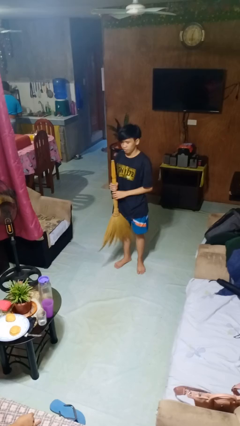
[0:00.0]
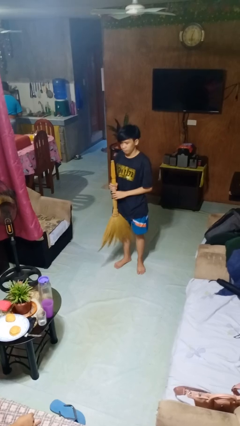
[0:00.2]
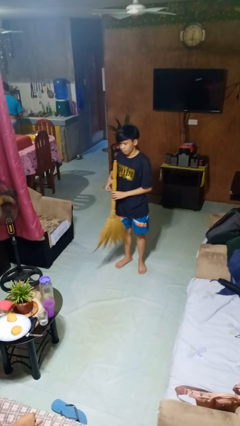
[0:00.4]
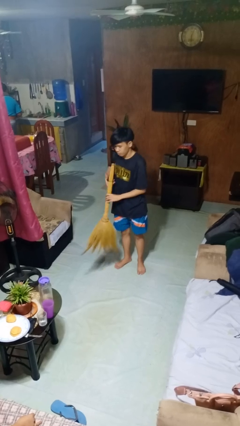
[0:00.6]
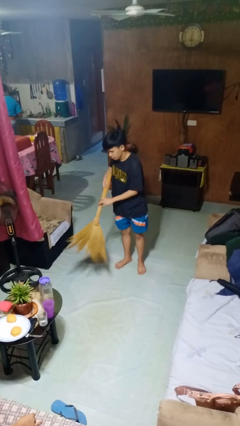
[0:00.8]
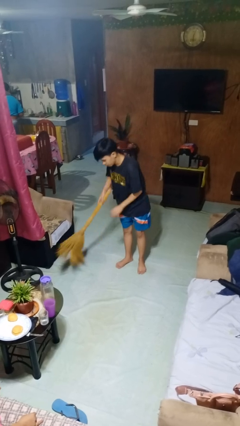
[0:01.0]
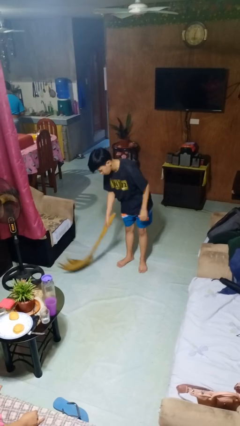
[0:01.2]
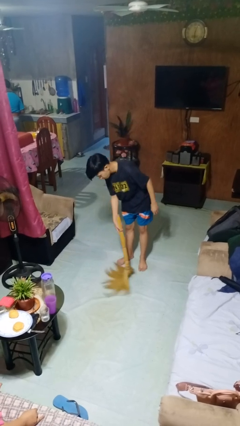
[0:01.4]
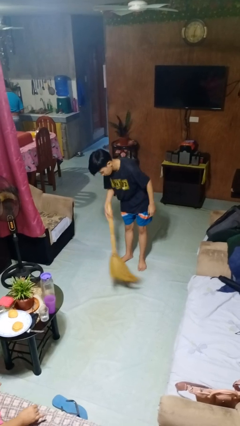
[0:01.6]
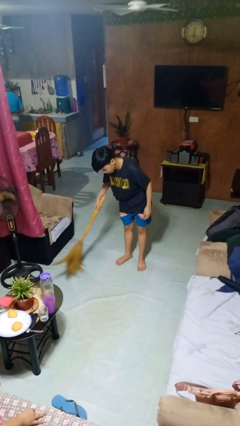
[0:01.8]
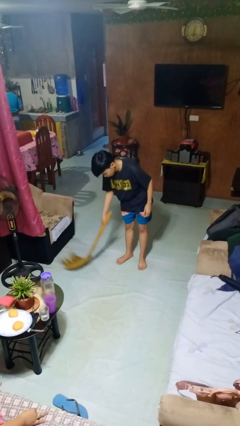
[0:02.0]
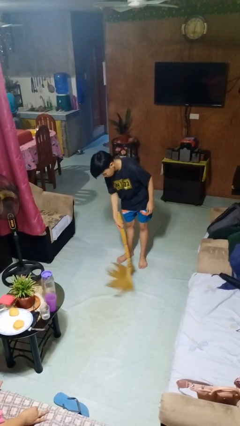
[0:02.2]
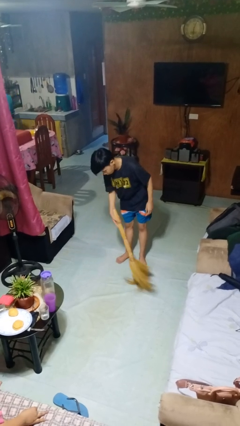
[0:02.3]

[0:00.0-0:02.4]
person sweeps floor

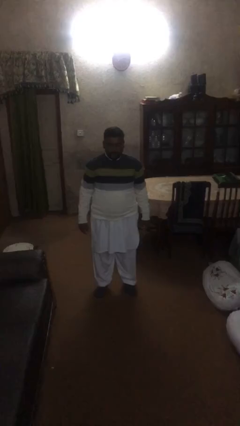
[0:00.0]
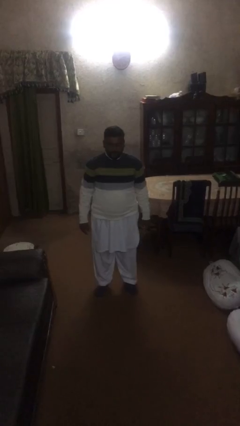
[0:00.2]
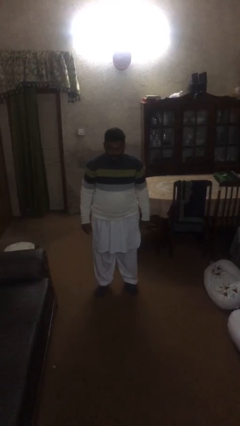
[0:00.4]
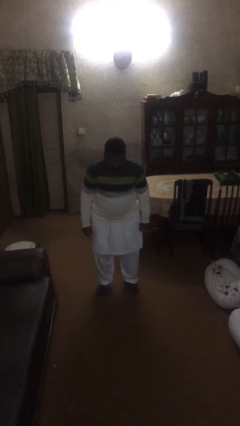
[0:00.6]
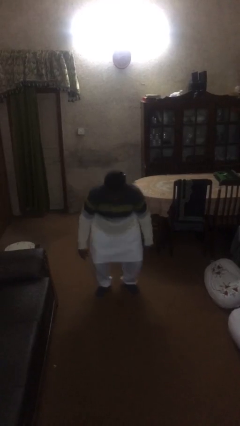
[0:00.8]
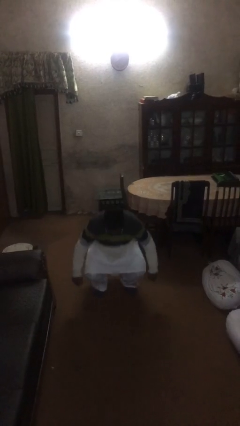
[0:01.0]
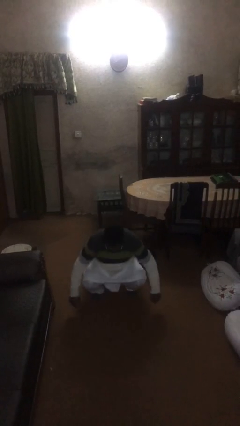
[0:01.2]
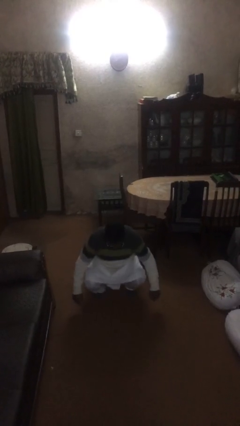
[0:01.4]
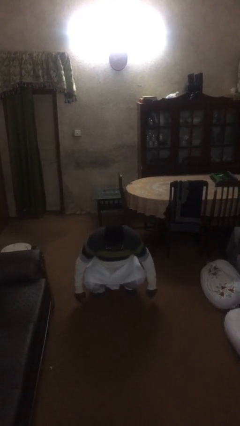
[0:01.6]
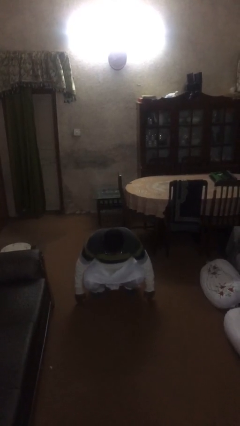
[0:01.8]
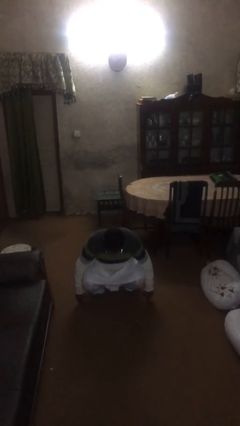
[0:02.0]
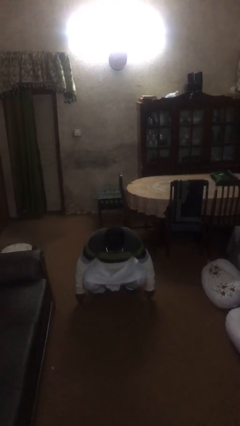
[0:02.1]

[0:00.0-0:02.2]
person sits down

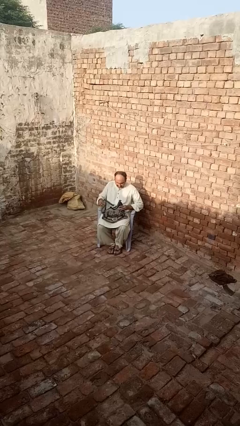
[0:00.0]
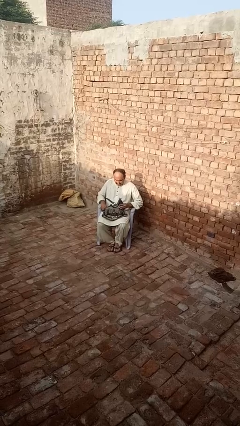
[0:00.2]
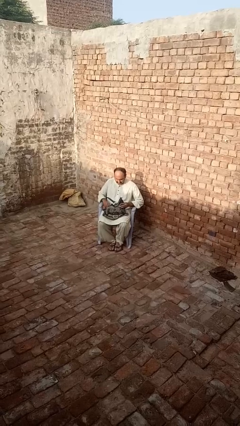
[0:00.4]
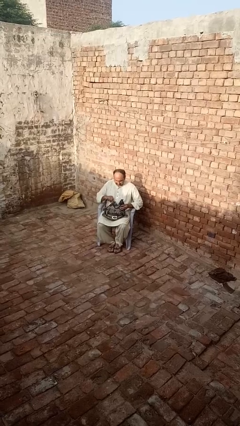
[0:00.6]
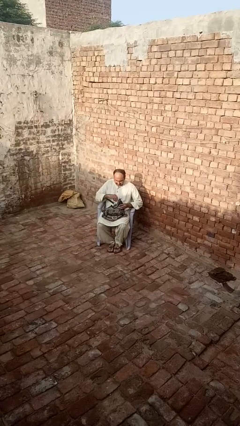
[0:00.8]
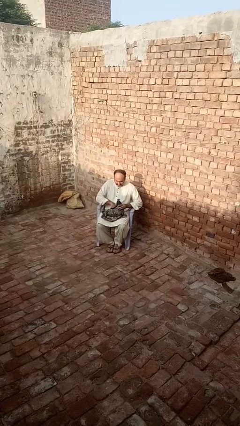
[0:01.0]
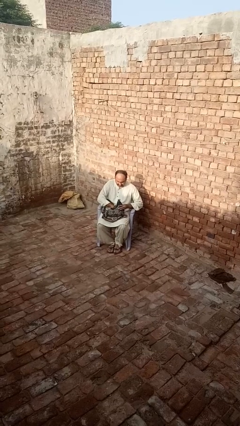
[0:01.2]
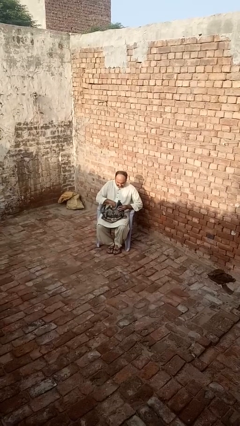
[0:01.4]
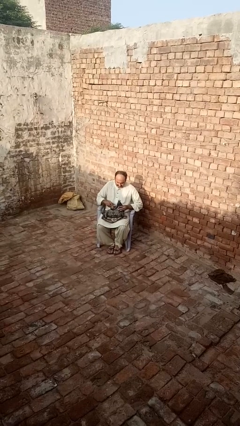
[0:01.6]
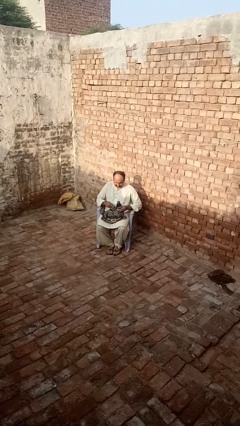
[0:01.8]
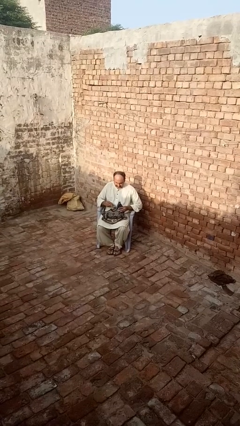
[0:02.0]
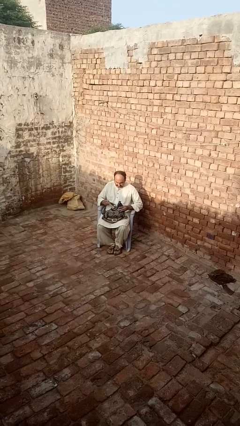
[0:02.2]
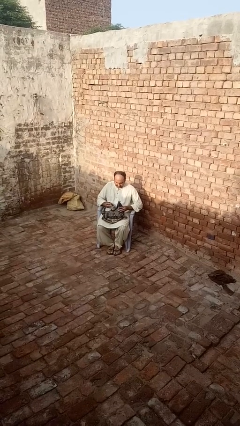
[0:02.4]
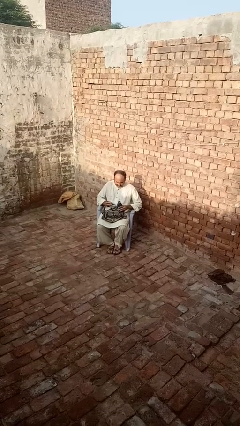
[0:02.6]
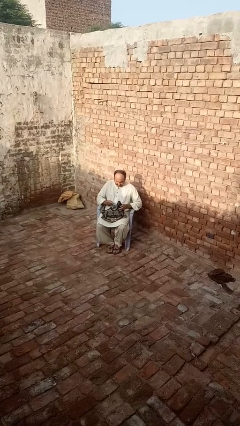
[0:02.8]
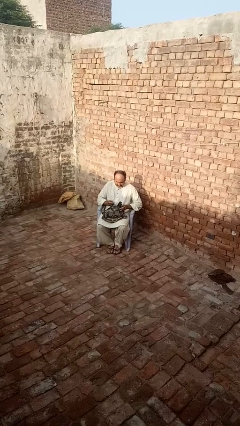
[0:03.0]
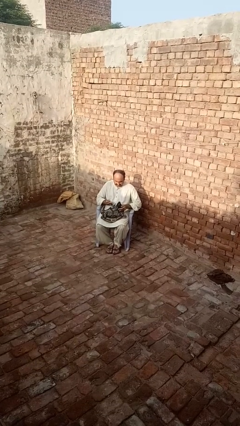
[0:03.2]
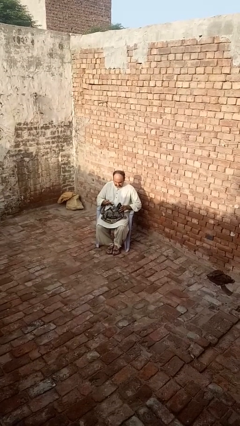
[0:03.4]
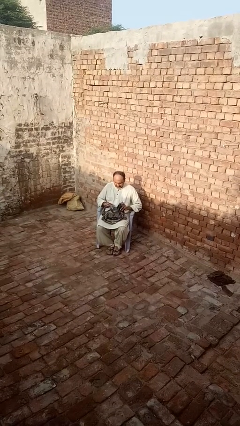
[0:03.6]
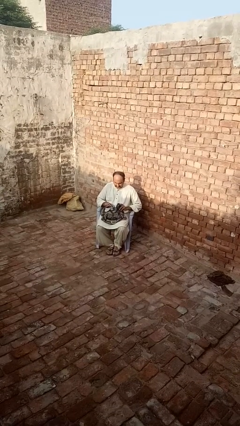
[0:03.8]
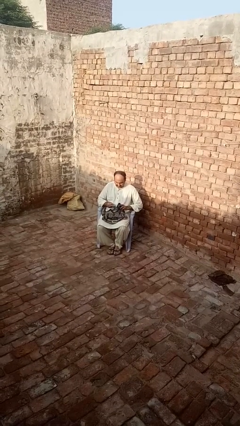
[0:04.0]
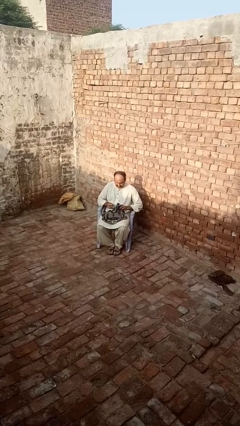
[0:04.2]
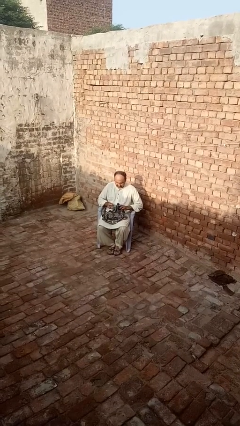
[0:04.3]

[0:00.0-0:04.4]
person takes object from purse

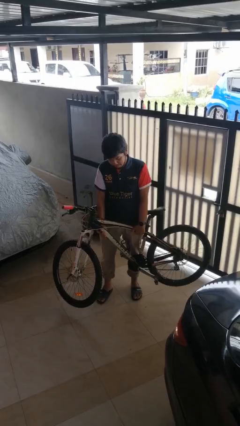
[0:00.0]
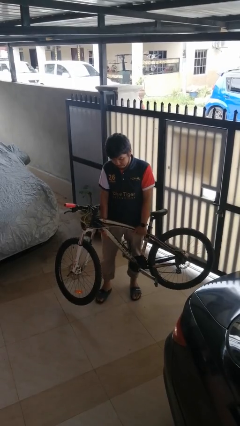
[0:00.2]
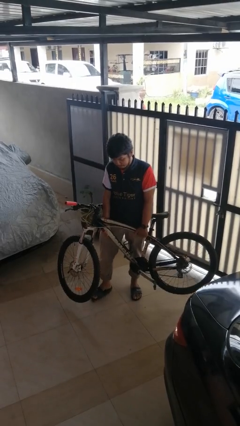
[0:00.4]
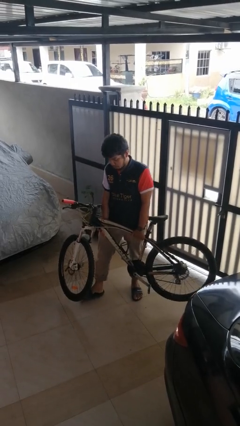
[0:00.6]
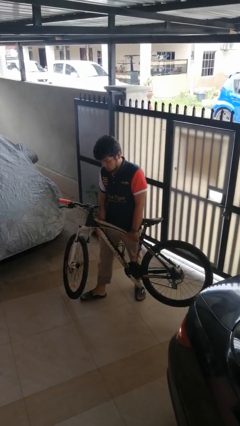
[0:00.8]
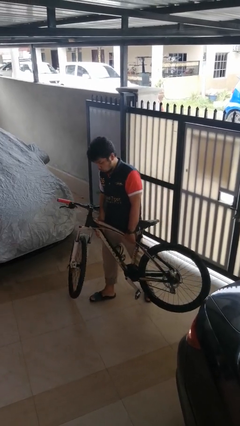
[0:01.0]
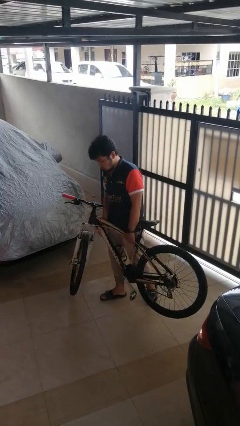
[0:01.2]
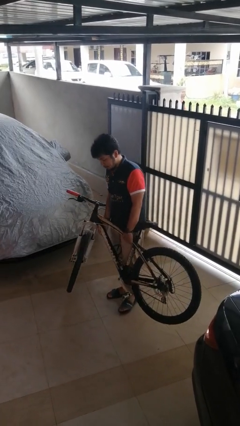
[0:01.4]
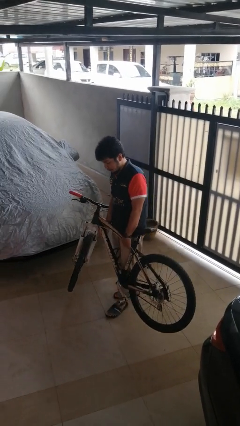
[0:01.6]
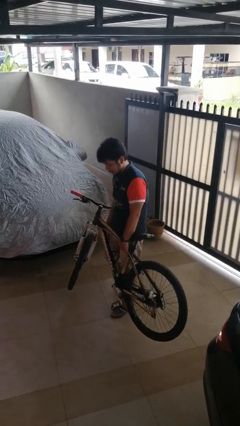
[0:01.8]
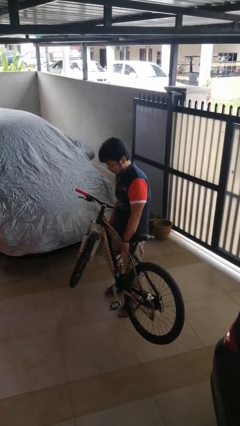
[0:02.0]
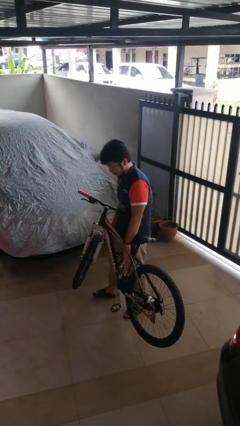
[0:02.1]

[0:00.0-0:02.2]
person carries bicycle

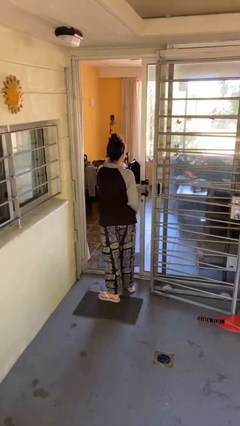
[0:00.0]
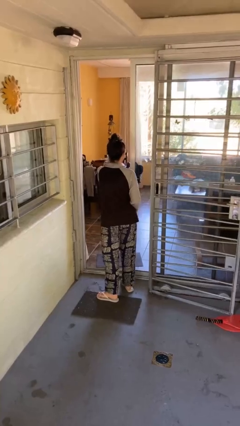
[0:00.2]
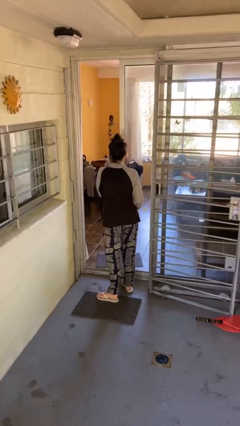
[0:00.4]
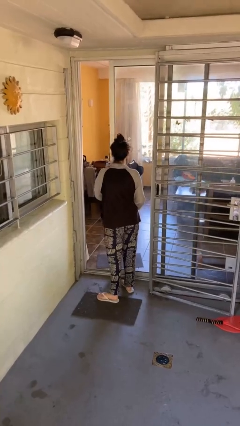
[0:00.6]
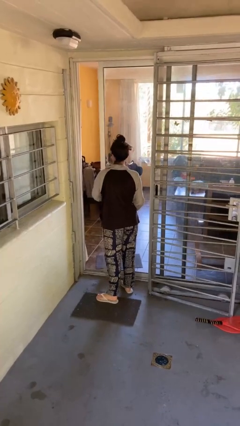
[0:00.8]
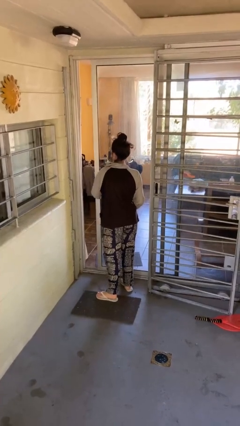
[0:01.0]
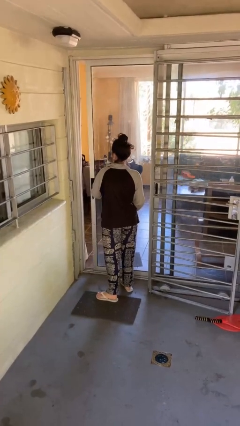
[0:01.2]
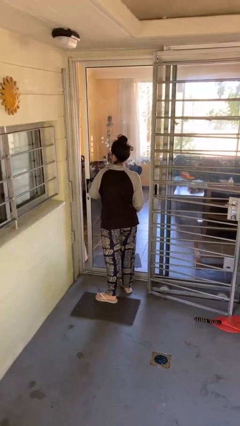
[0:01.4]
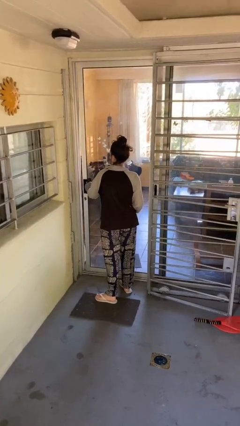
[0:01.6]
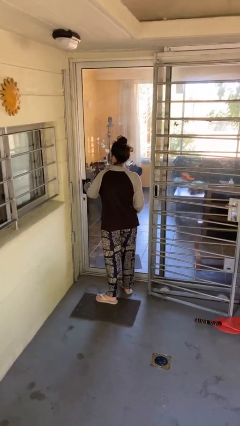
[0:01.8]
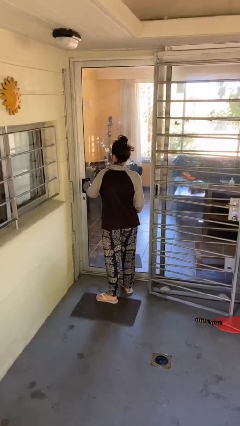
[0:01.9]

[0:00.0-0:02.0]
person closes facility door

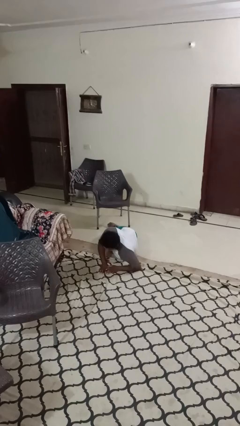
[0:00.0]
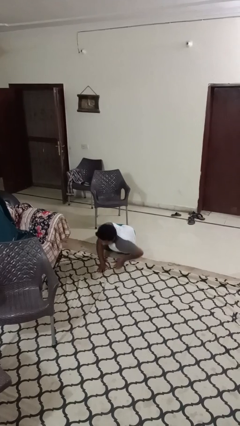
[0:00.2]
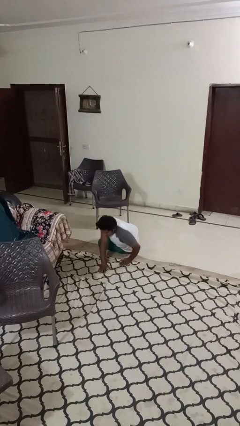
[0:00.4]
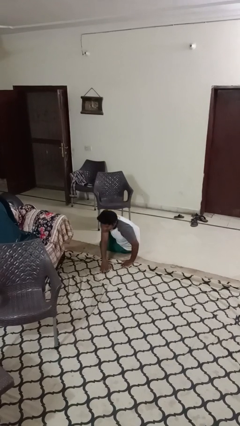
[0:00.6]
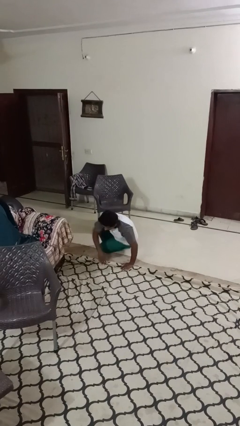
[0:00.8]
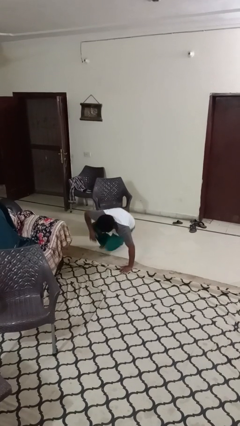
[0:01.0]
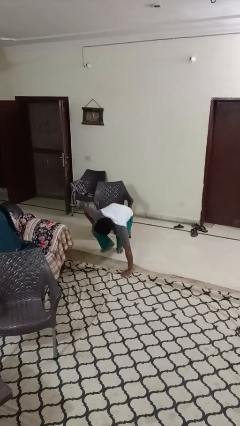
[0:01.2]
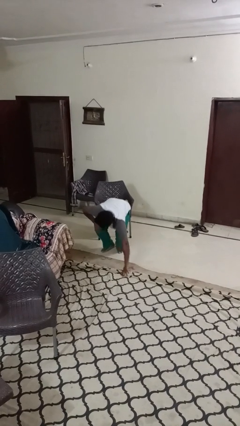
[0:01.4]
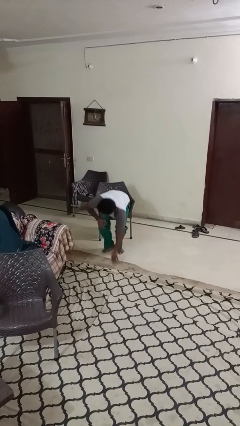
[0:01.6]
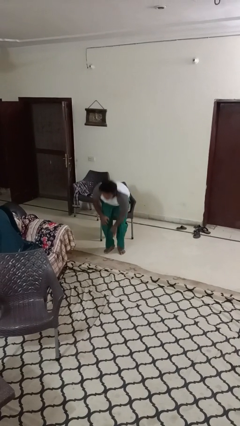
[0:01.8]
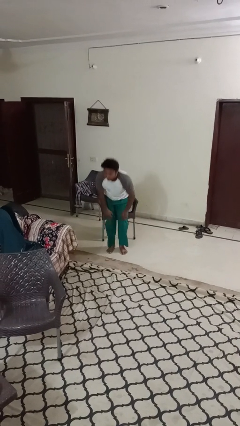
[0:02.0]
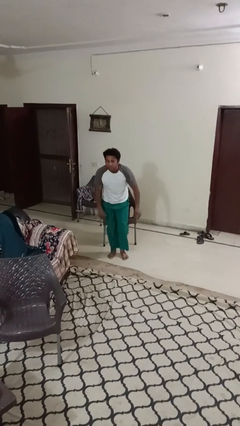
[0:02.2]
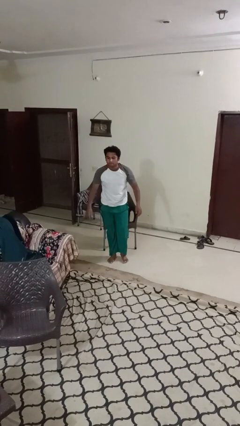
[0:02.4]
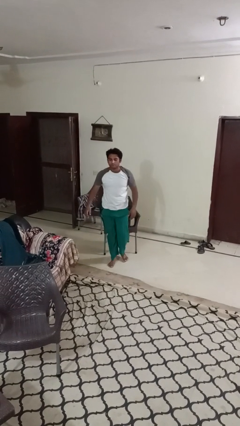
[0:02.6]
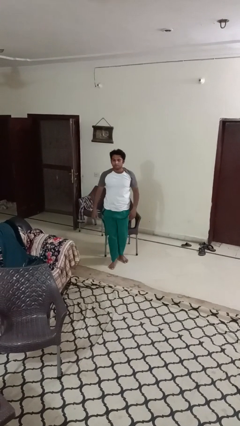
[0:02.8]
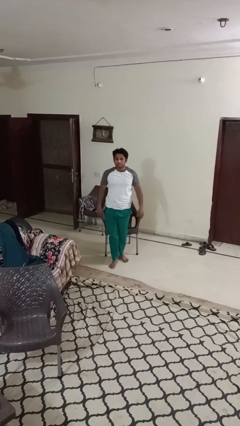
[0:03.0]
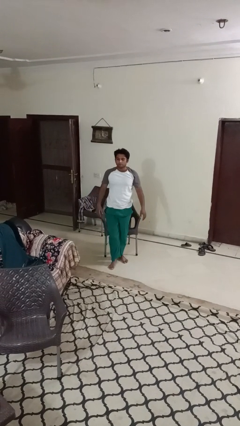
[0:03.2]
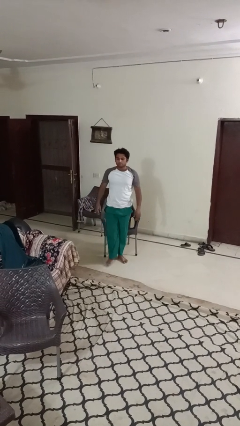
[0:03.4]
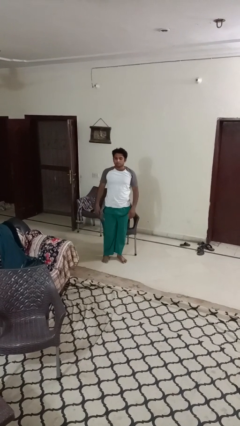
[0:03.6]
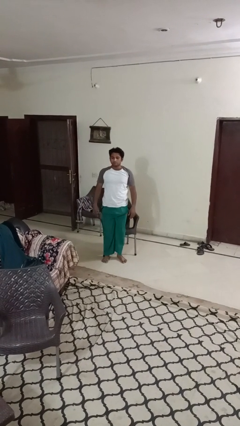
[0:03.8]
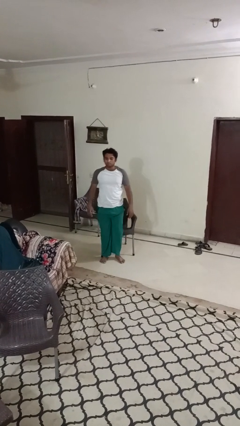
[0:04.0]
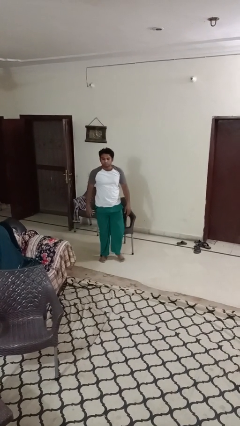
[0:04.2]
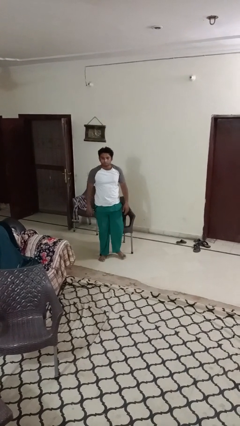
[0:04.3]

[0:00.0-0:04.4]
person stands up from floor

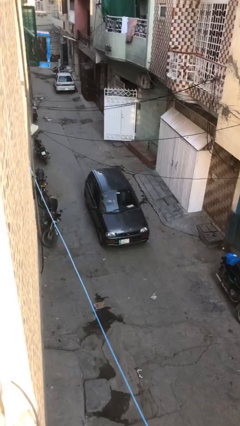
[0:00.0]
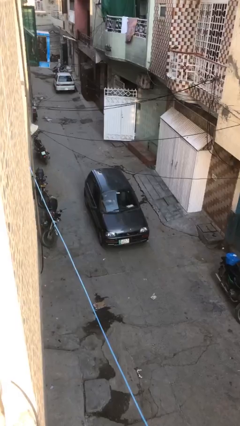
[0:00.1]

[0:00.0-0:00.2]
car drops off person
